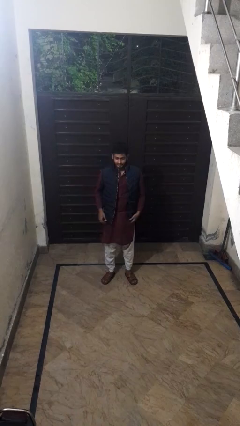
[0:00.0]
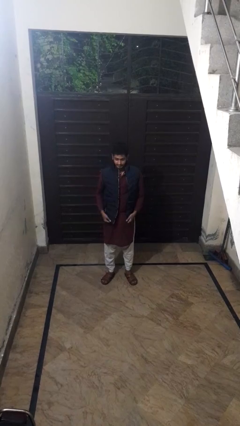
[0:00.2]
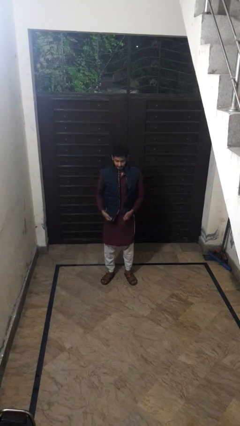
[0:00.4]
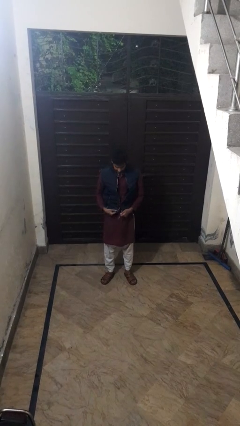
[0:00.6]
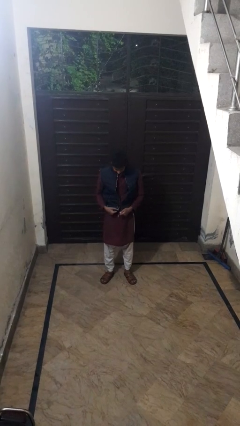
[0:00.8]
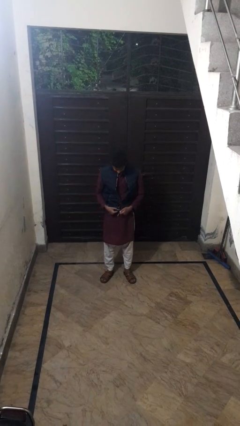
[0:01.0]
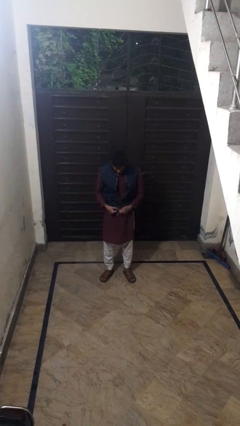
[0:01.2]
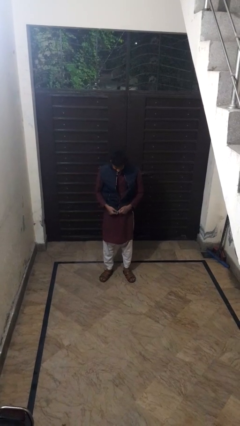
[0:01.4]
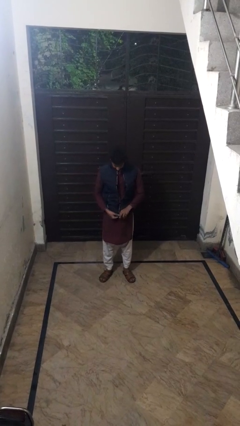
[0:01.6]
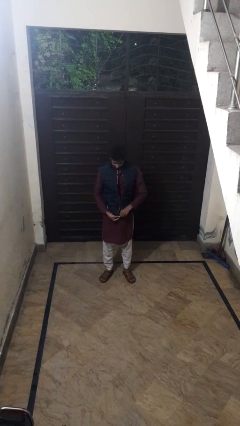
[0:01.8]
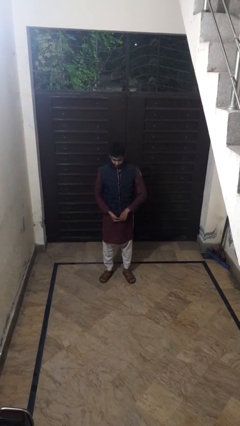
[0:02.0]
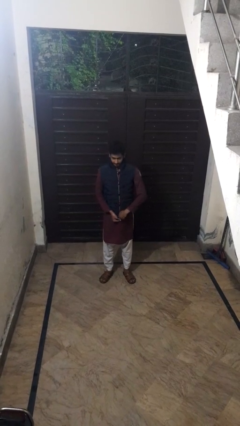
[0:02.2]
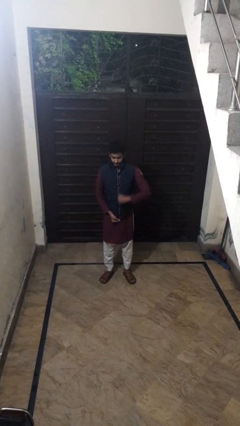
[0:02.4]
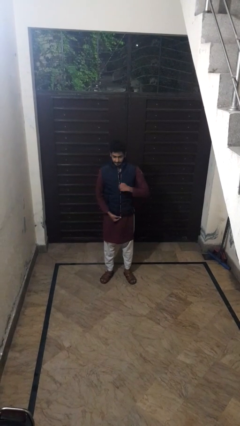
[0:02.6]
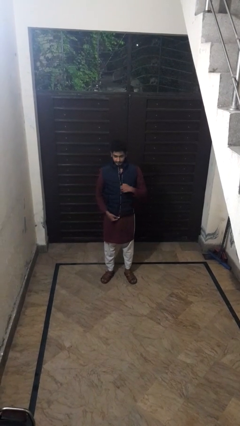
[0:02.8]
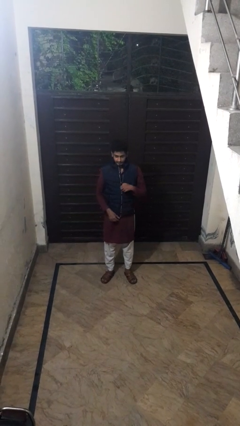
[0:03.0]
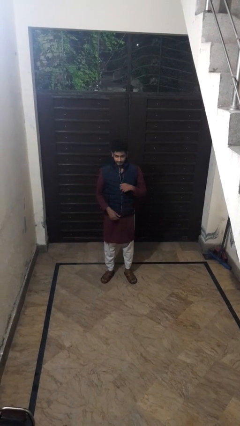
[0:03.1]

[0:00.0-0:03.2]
person zips up jacket

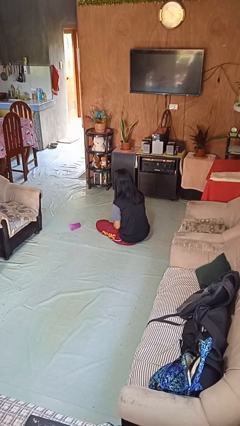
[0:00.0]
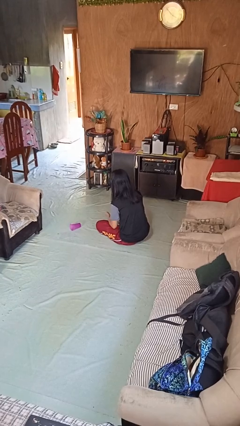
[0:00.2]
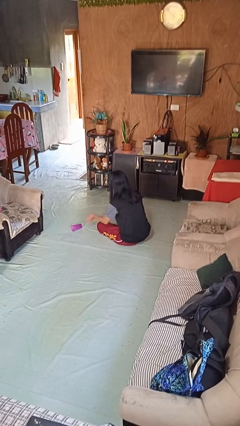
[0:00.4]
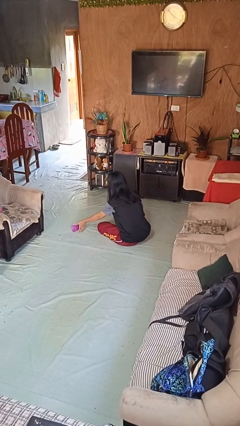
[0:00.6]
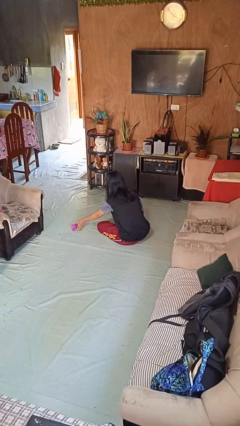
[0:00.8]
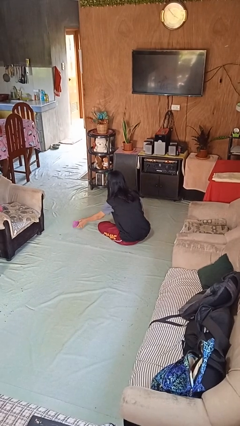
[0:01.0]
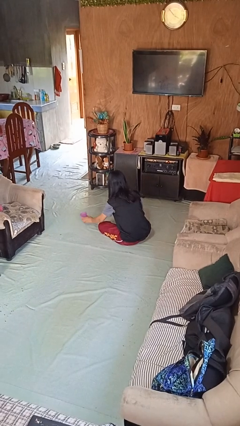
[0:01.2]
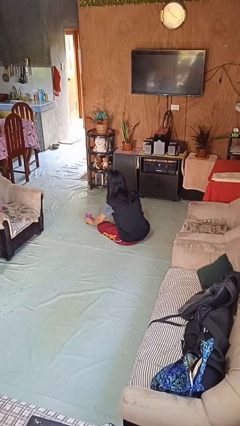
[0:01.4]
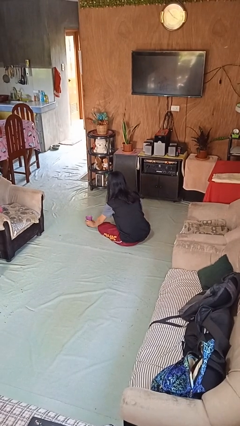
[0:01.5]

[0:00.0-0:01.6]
person sets upright glass

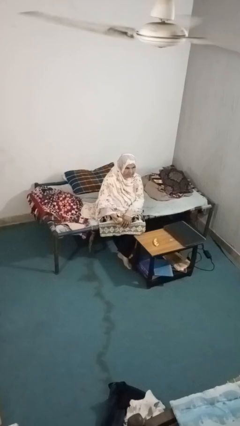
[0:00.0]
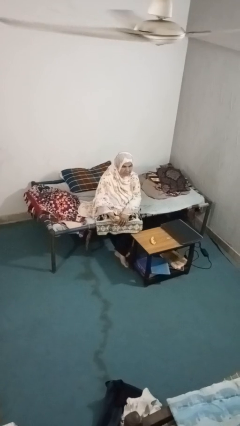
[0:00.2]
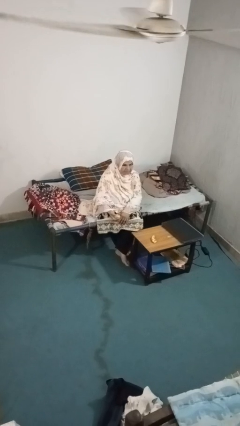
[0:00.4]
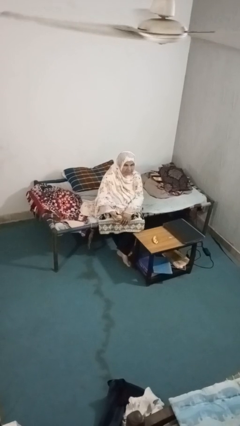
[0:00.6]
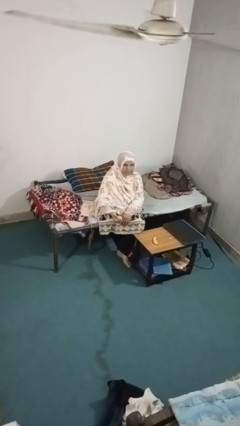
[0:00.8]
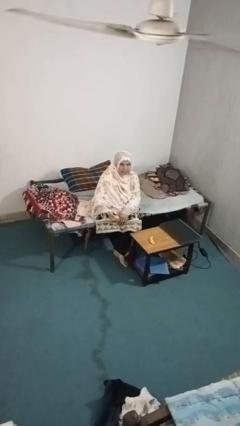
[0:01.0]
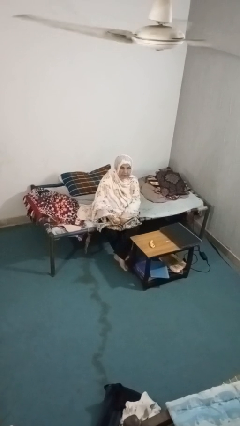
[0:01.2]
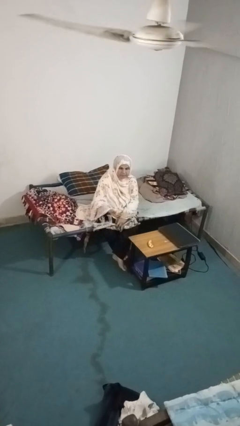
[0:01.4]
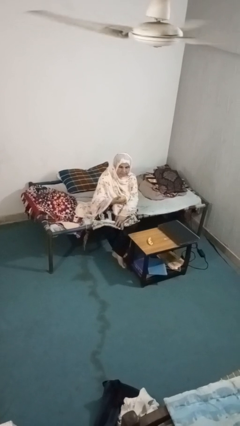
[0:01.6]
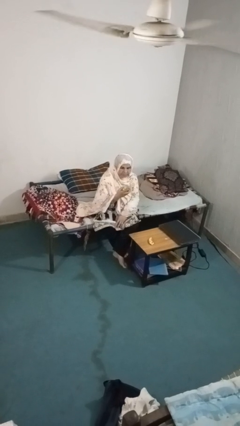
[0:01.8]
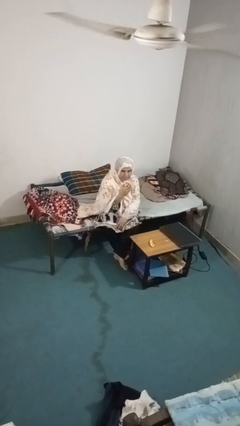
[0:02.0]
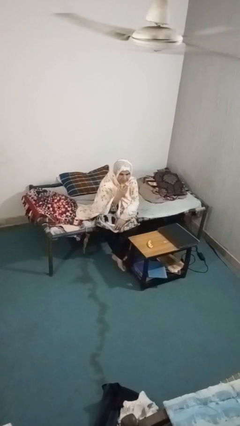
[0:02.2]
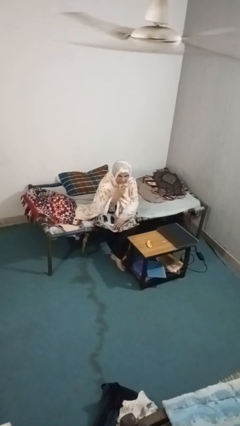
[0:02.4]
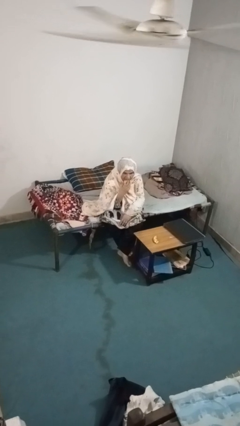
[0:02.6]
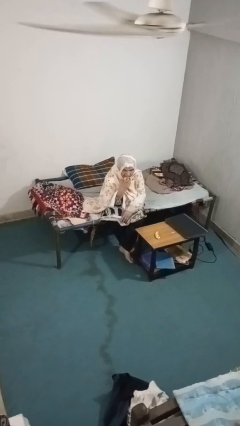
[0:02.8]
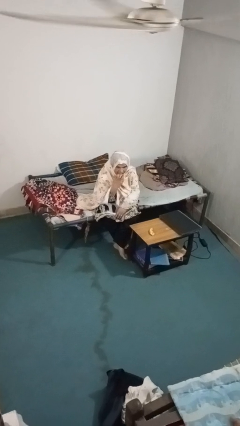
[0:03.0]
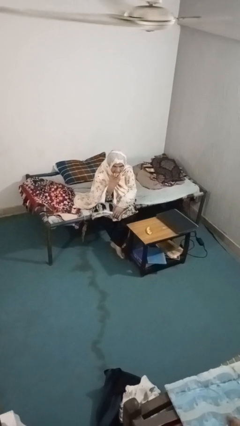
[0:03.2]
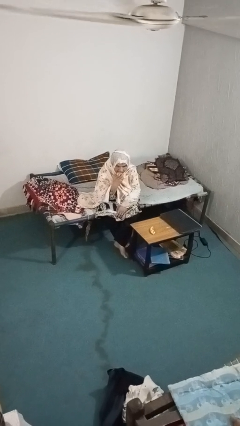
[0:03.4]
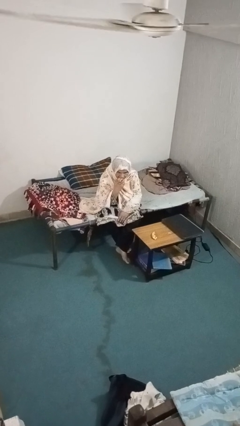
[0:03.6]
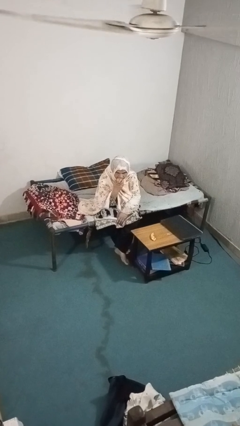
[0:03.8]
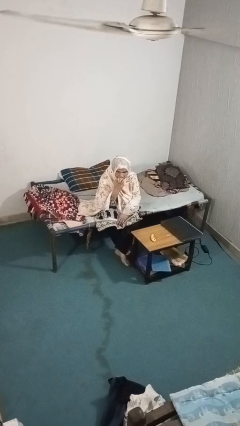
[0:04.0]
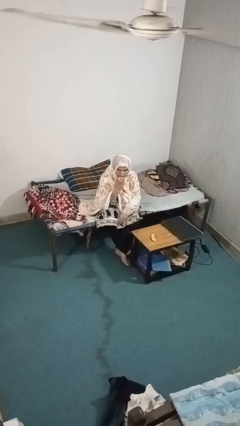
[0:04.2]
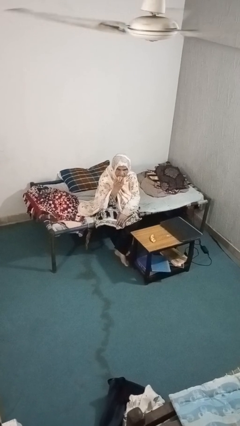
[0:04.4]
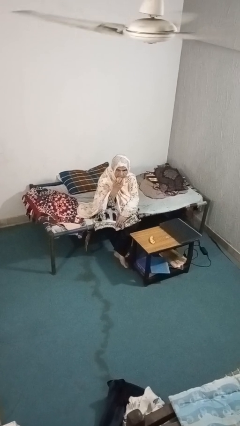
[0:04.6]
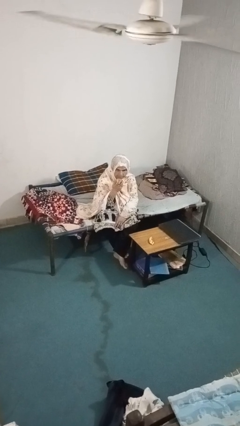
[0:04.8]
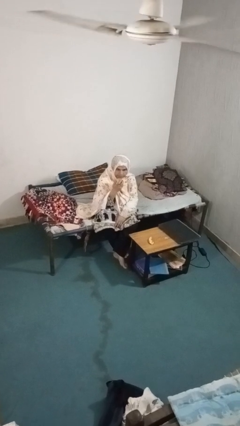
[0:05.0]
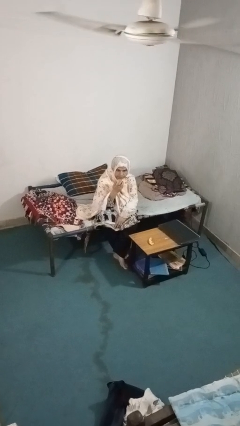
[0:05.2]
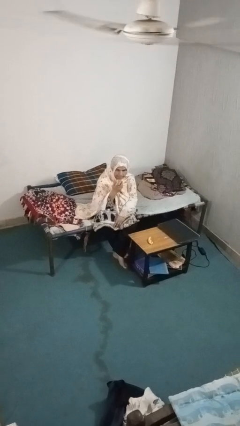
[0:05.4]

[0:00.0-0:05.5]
person eats apple

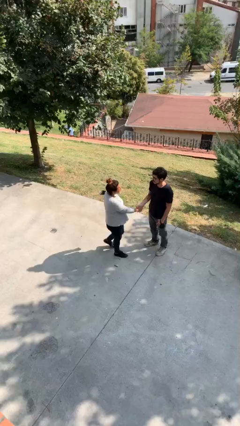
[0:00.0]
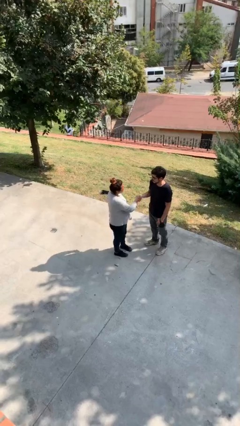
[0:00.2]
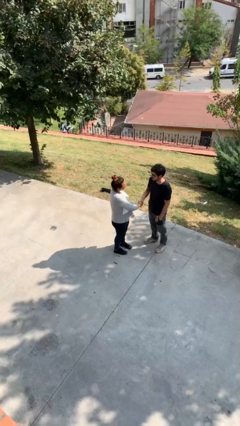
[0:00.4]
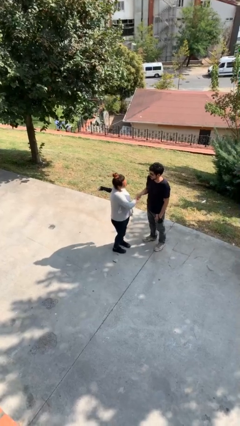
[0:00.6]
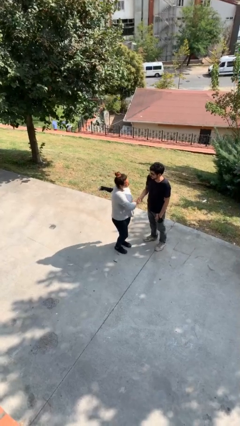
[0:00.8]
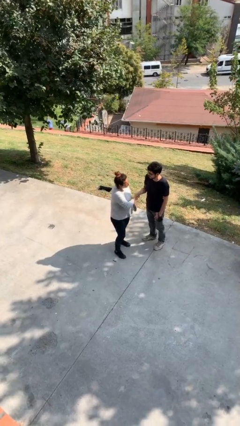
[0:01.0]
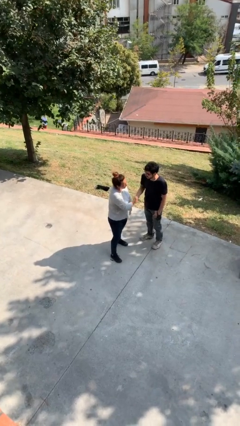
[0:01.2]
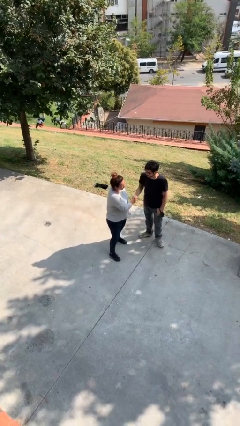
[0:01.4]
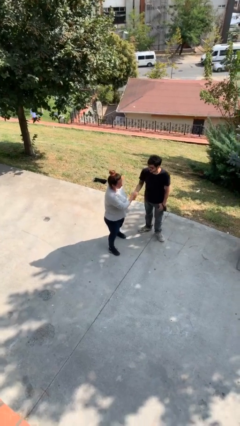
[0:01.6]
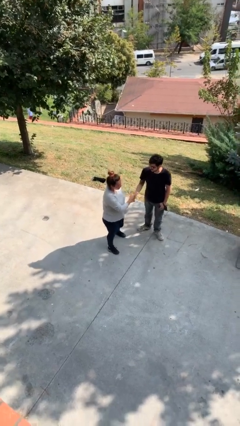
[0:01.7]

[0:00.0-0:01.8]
person shakes hand

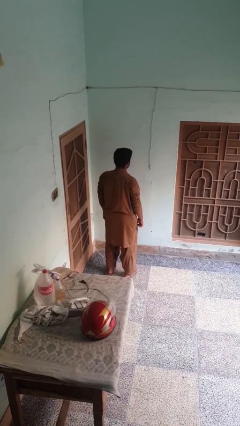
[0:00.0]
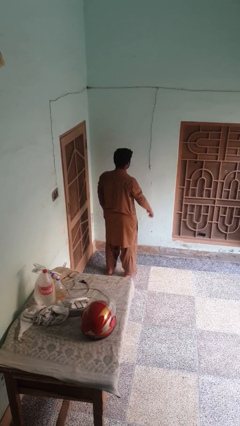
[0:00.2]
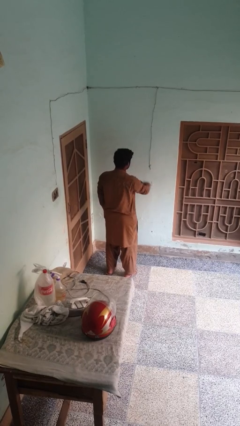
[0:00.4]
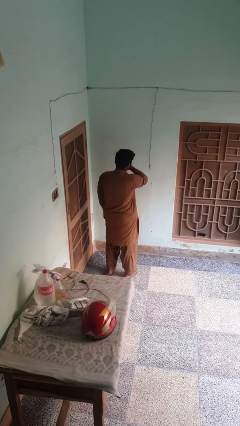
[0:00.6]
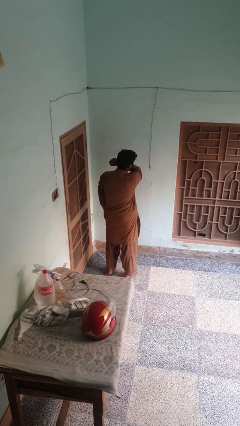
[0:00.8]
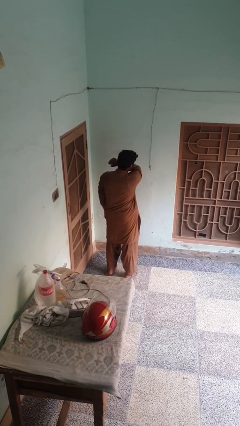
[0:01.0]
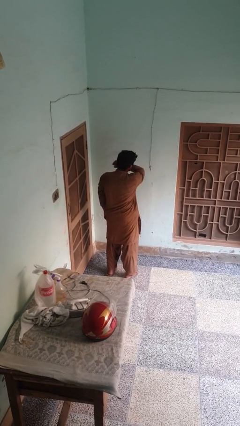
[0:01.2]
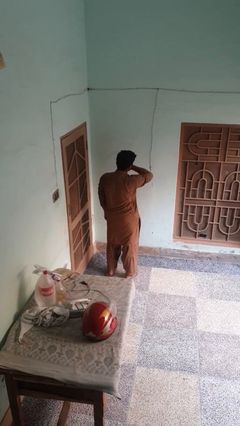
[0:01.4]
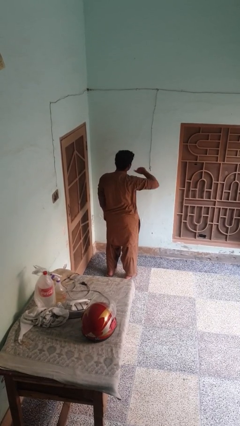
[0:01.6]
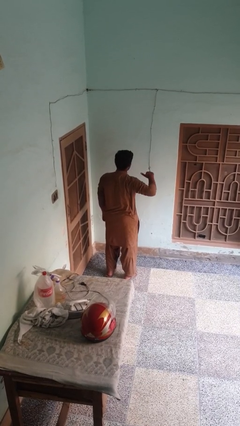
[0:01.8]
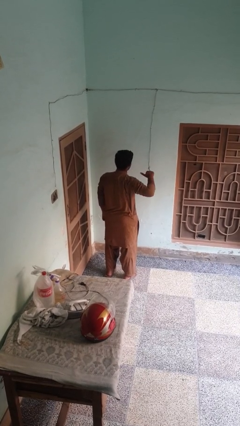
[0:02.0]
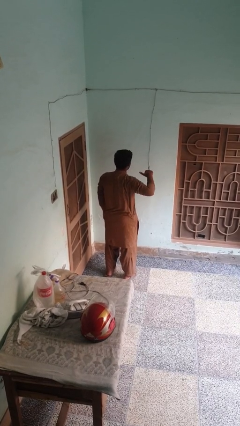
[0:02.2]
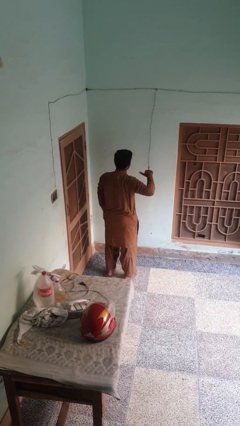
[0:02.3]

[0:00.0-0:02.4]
person gestures cut

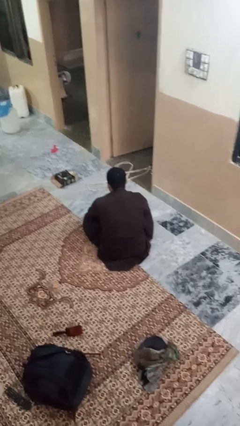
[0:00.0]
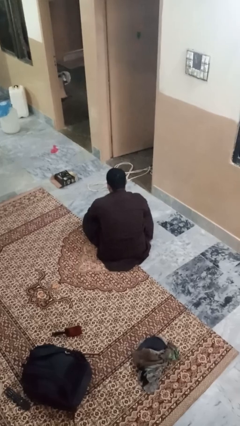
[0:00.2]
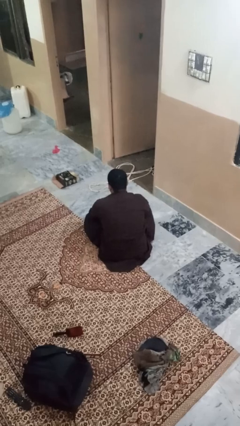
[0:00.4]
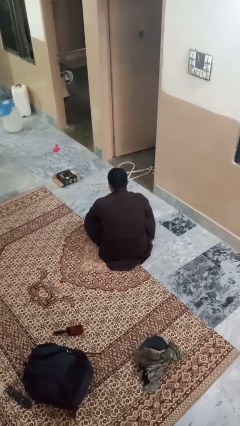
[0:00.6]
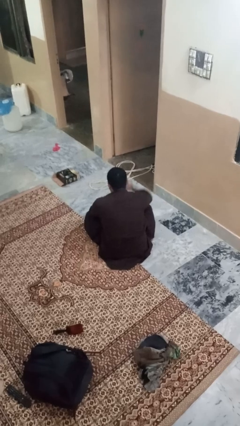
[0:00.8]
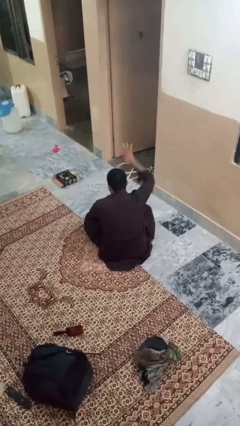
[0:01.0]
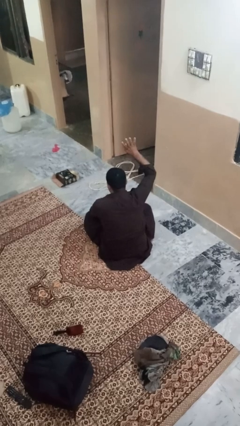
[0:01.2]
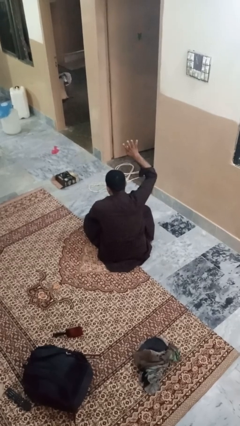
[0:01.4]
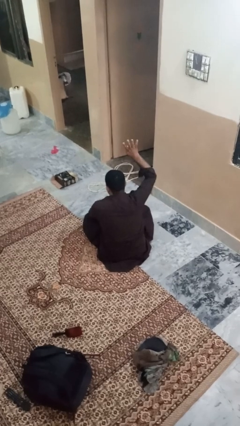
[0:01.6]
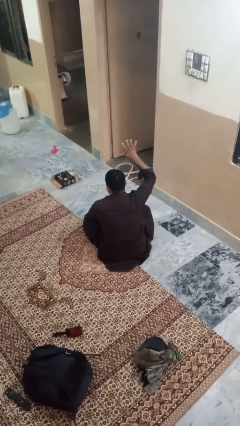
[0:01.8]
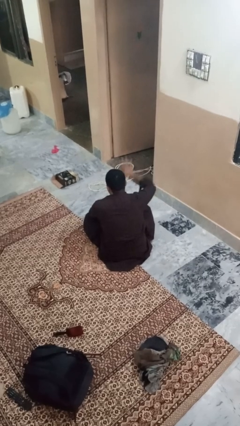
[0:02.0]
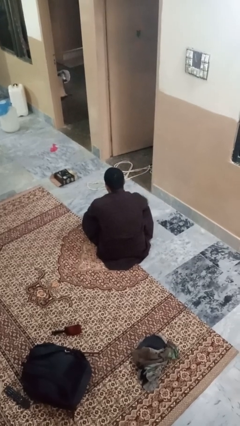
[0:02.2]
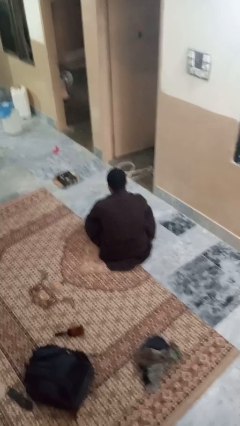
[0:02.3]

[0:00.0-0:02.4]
person gestures number four

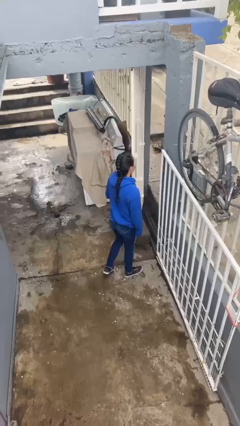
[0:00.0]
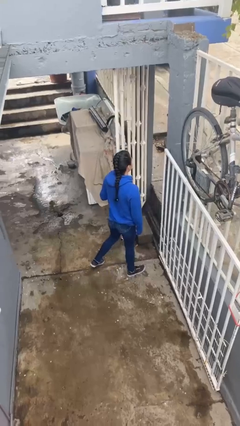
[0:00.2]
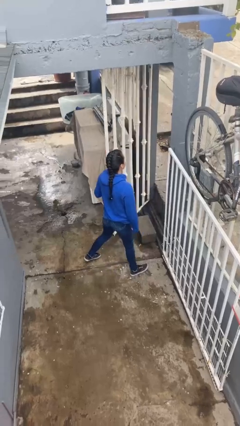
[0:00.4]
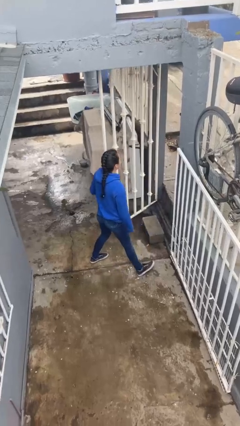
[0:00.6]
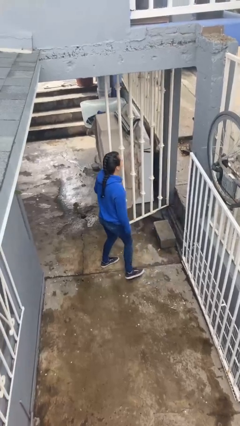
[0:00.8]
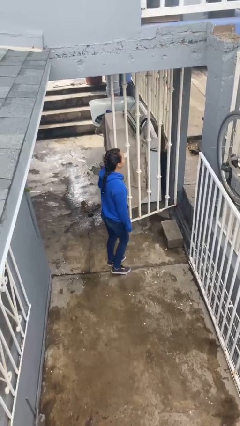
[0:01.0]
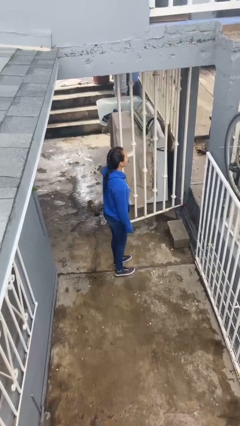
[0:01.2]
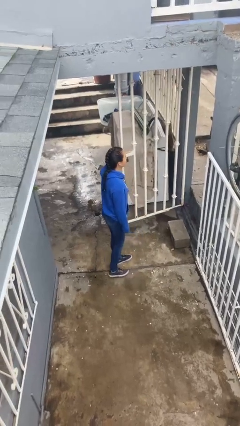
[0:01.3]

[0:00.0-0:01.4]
person opens facility door
